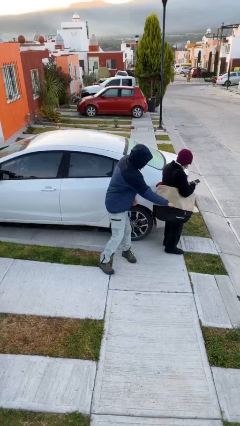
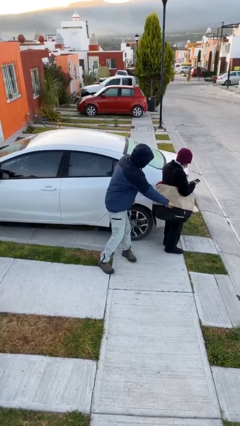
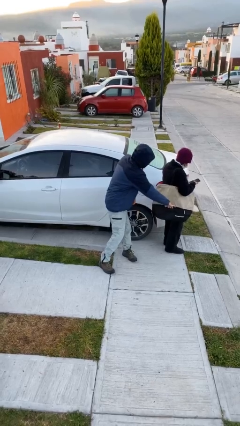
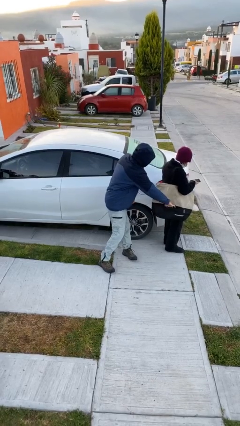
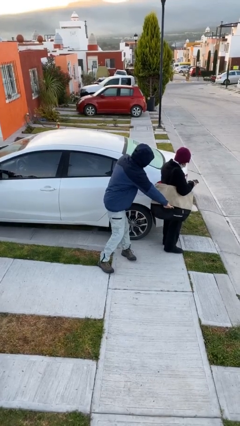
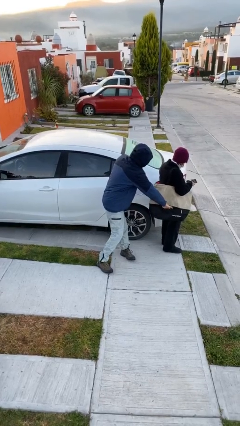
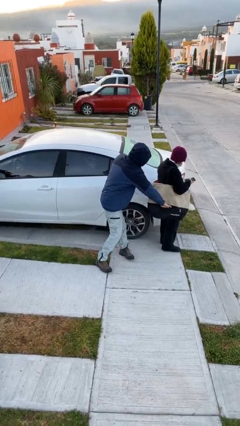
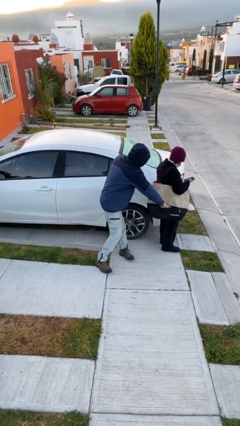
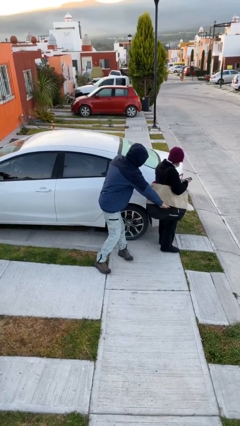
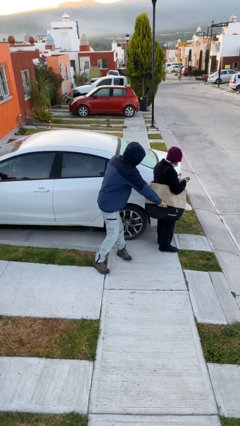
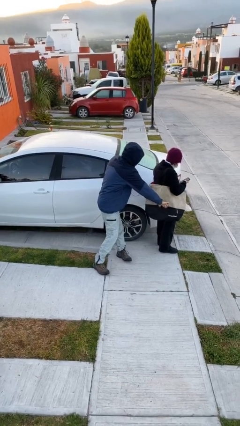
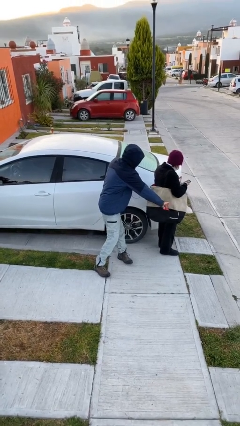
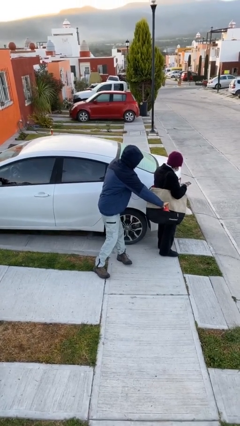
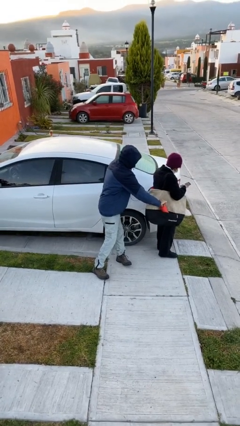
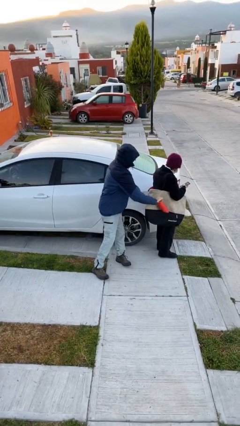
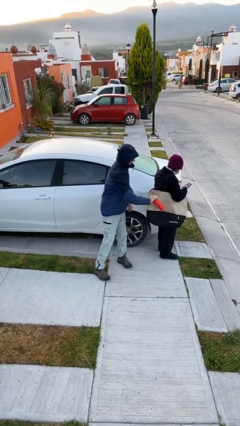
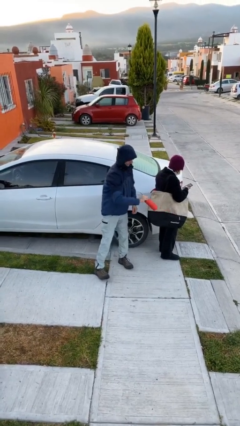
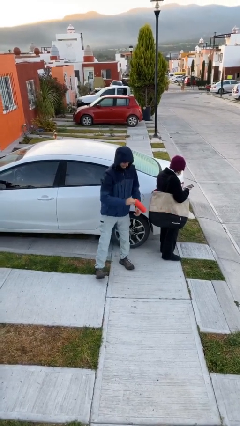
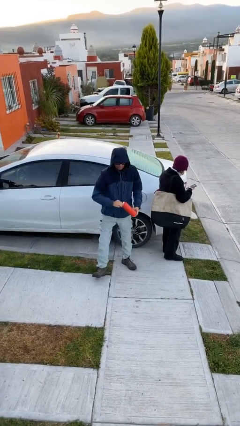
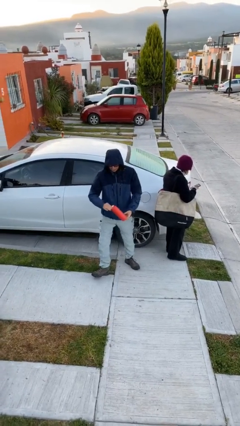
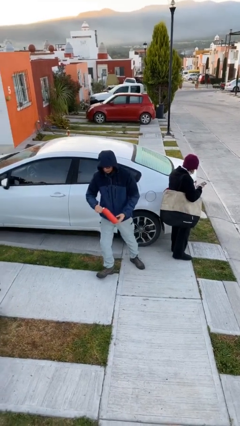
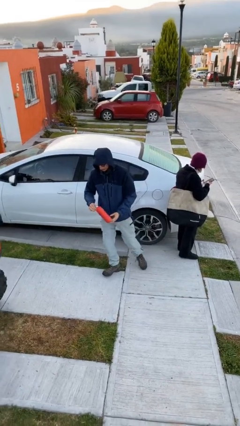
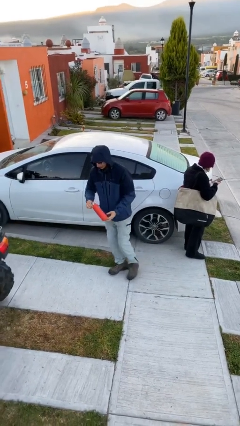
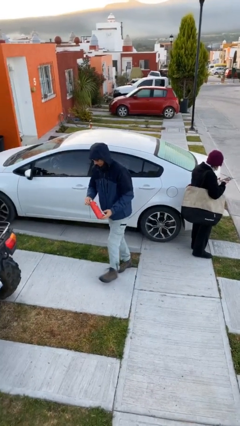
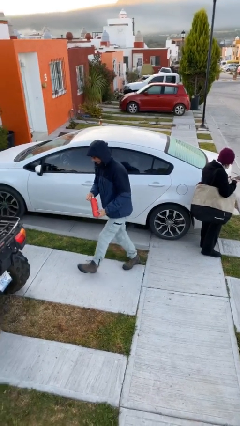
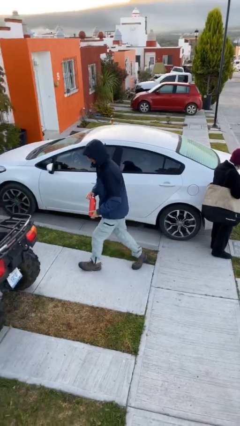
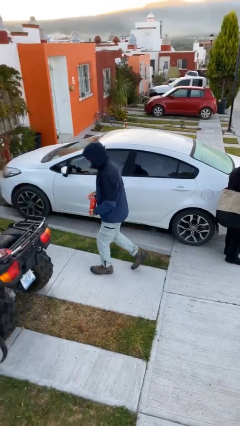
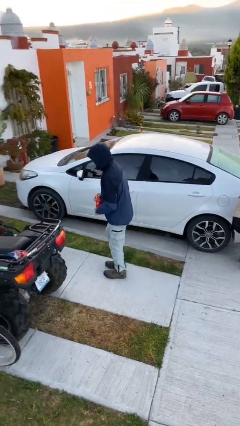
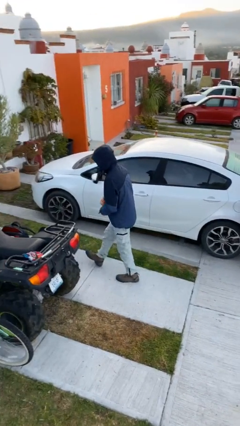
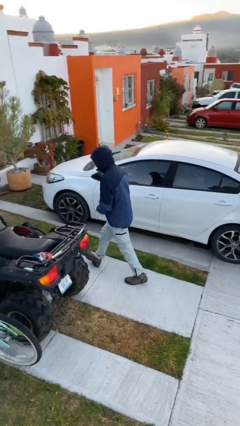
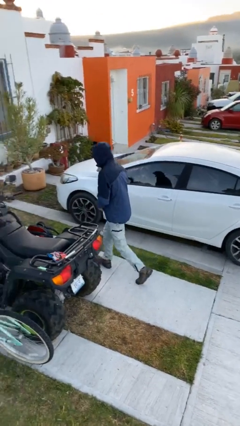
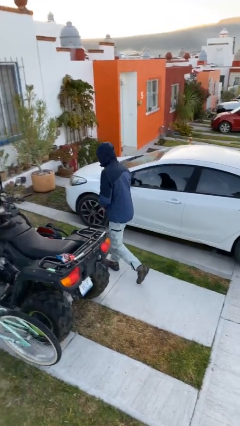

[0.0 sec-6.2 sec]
person steals object from person

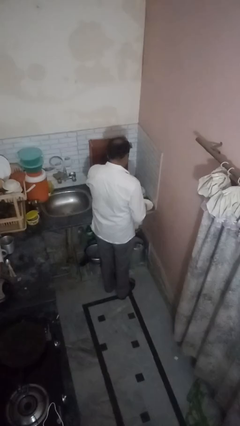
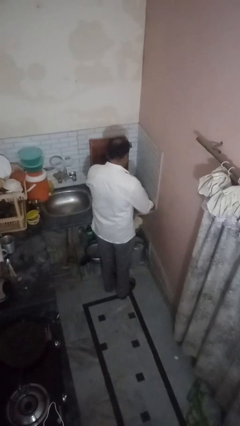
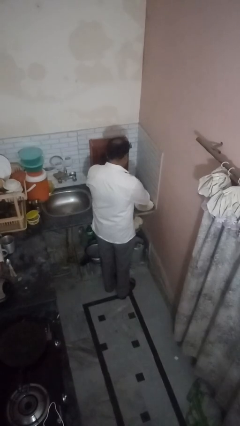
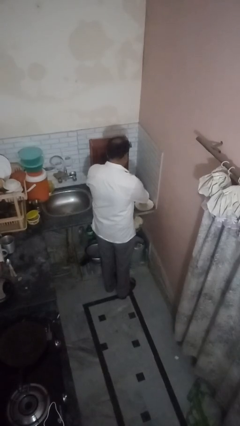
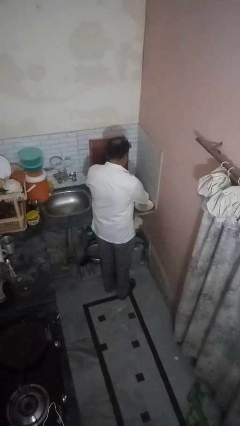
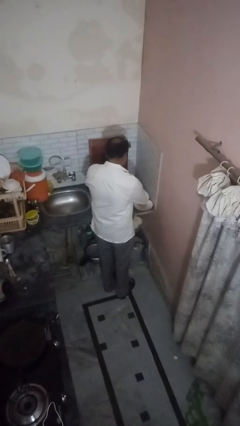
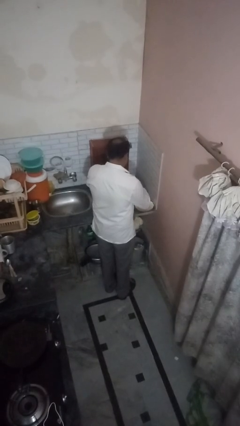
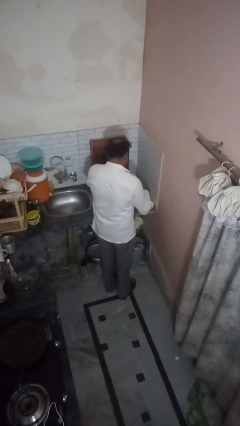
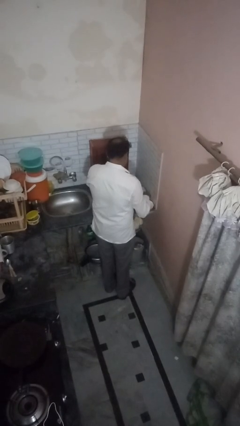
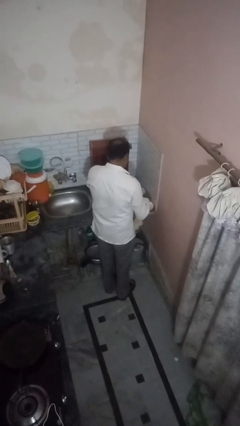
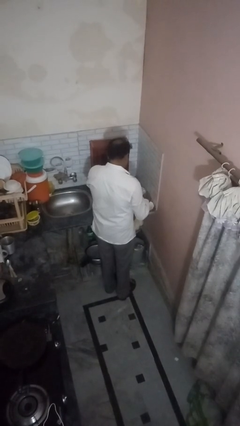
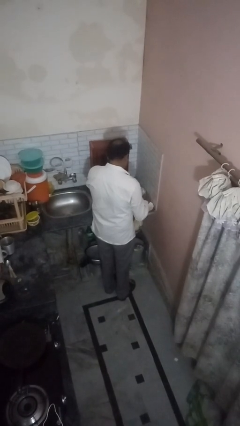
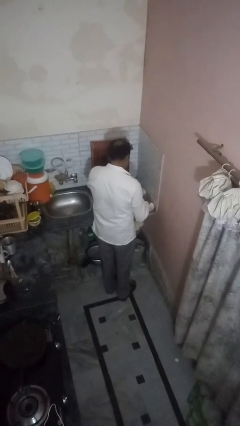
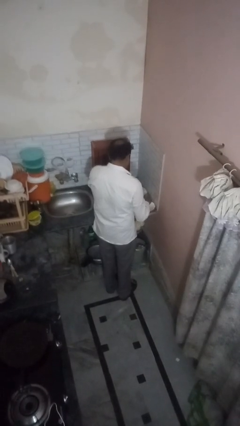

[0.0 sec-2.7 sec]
person pours into bowl

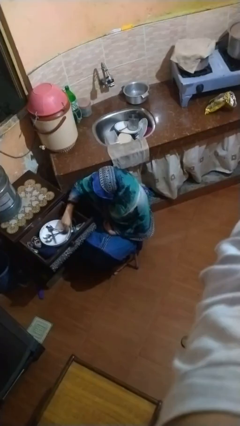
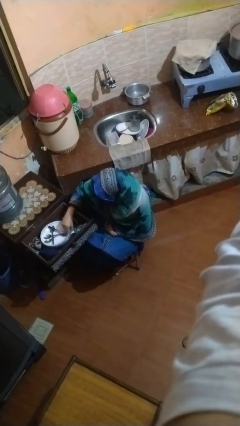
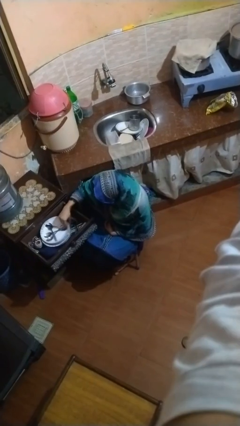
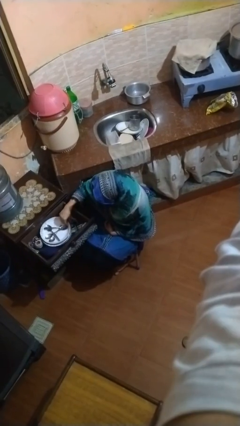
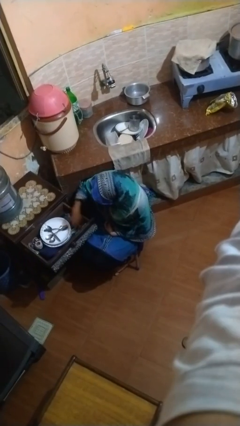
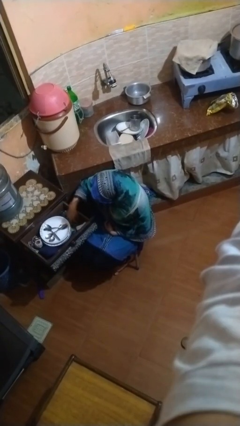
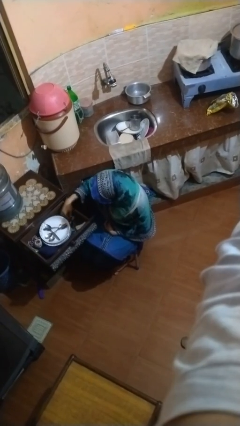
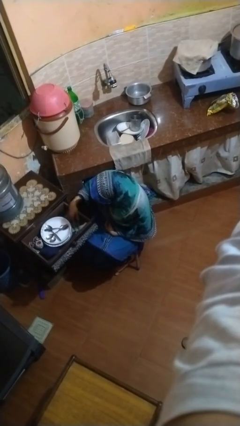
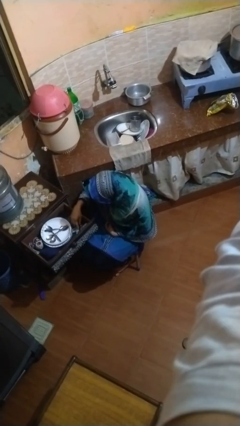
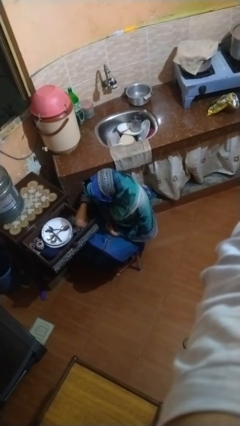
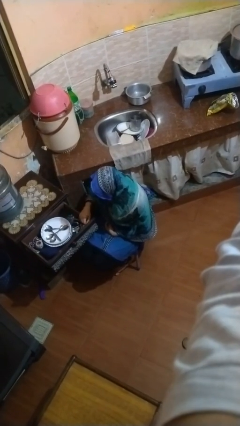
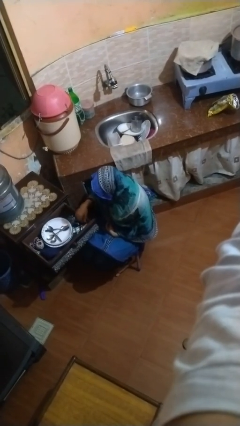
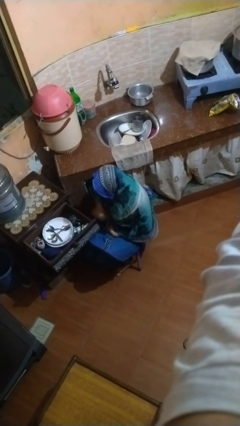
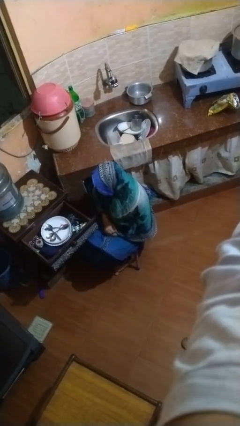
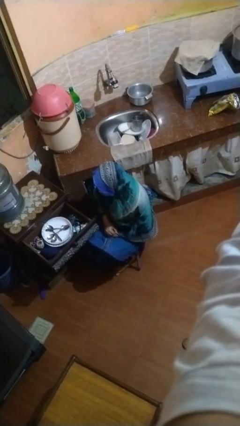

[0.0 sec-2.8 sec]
person searches in kitchen drawer

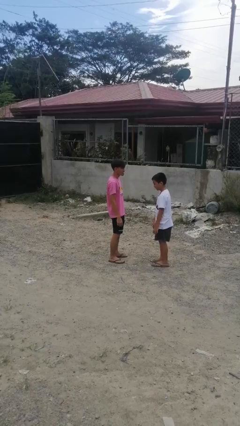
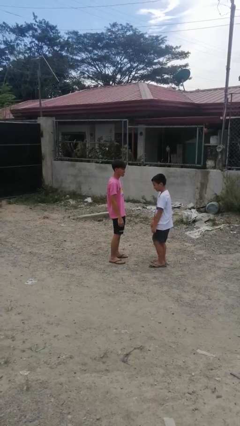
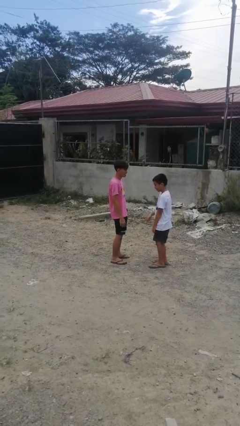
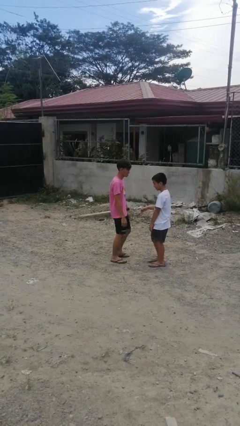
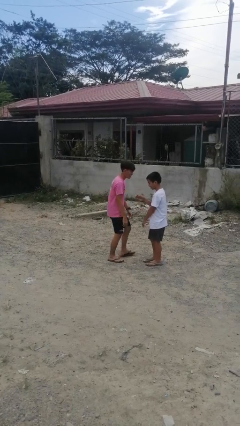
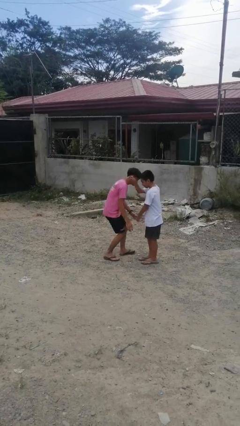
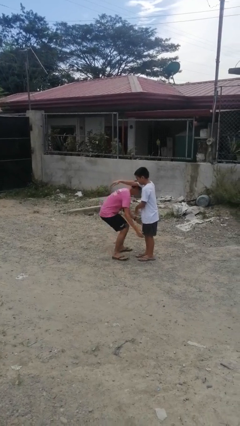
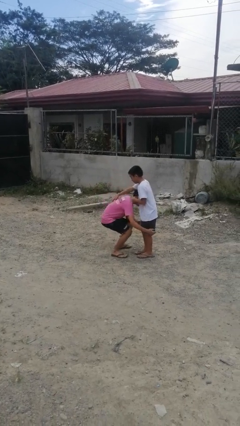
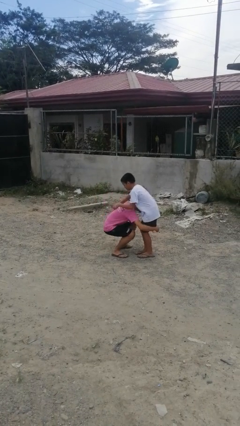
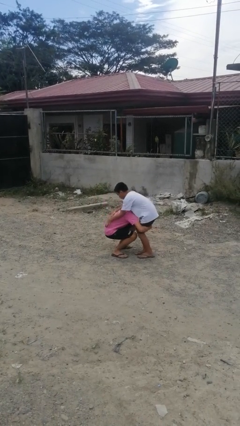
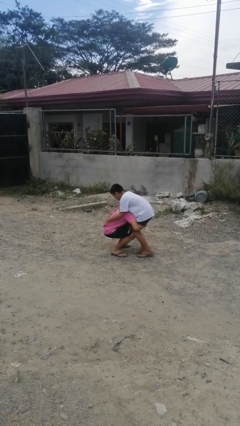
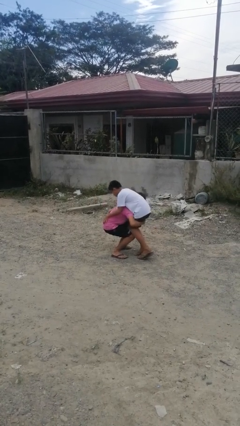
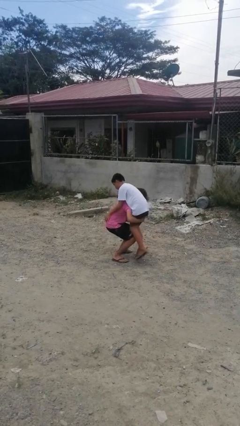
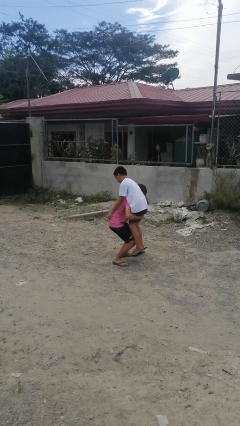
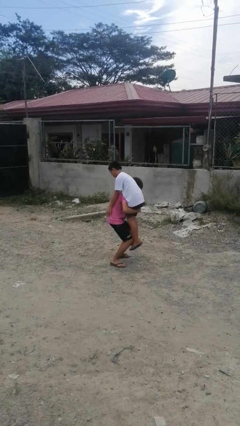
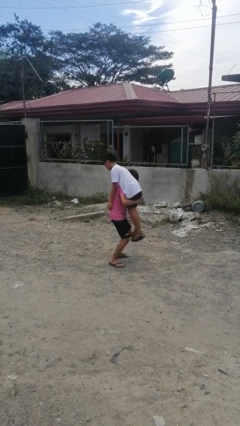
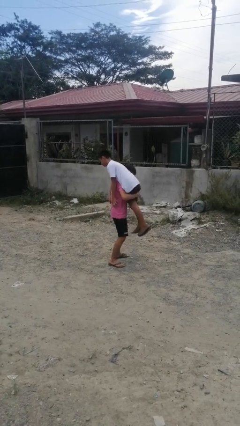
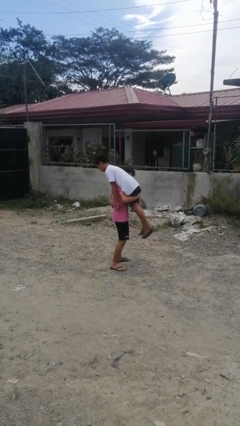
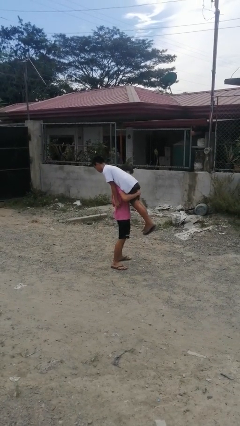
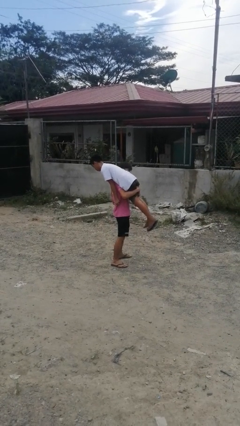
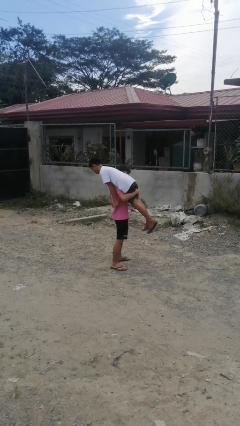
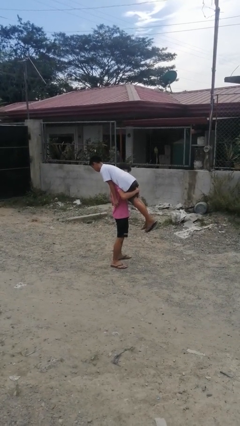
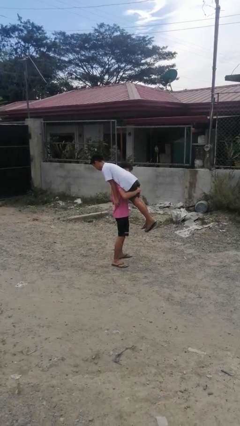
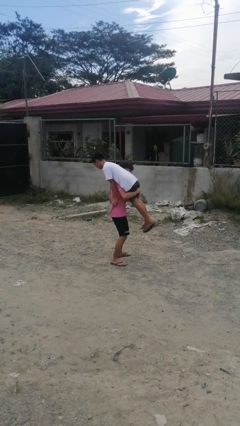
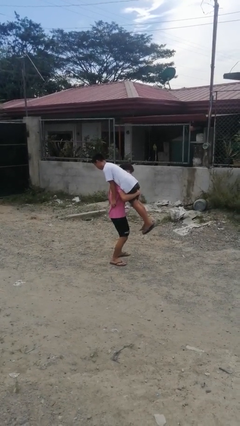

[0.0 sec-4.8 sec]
person carries person over shoulder

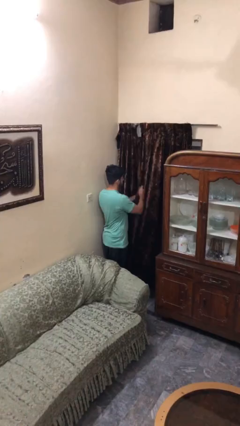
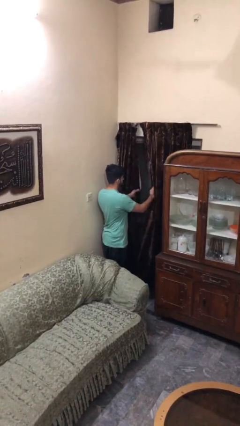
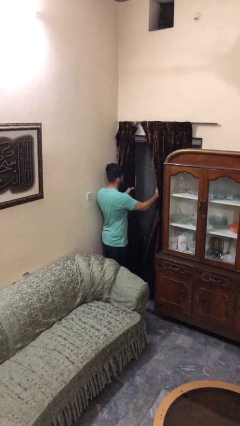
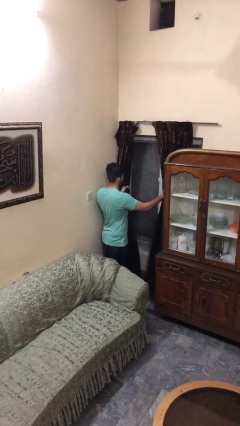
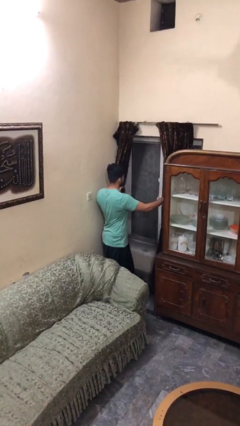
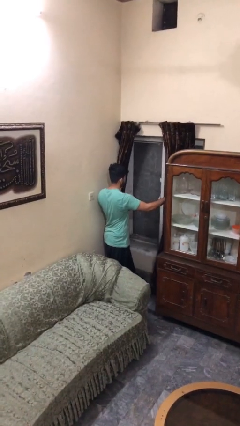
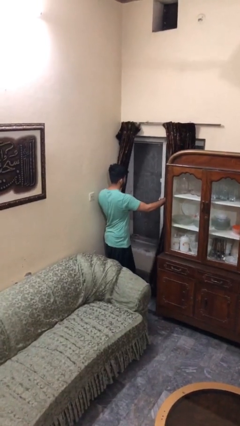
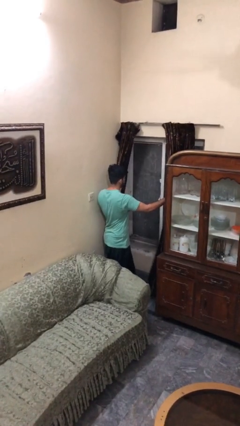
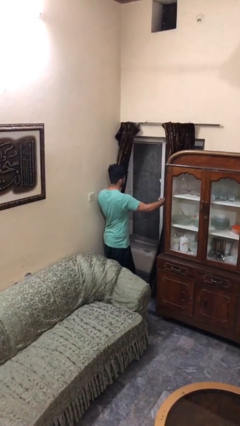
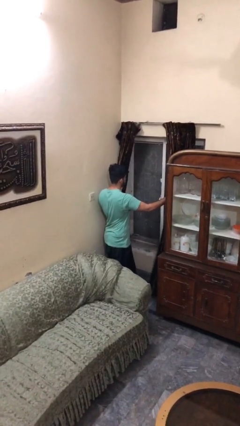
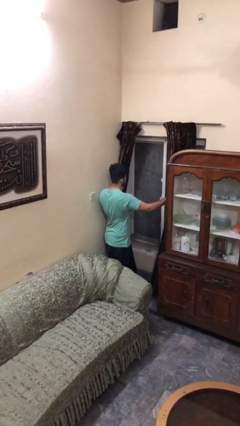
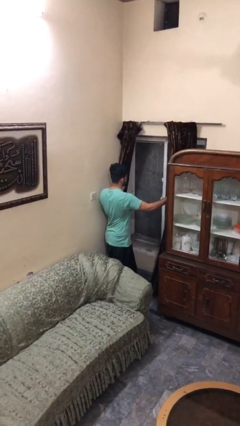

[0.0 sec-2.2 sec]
person opens curtains
